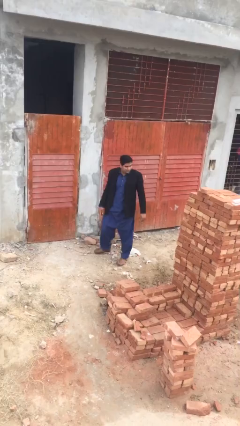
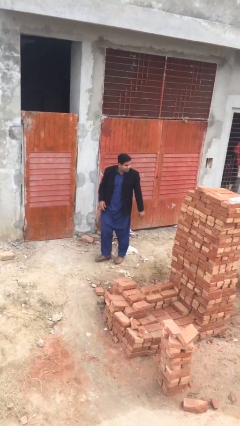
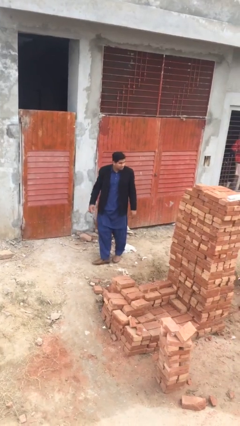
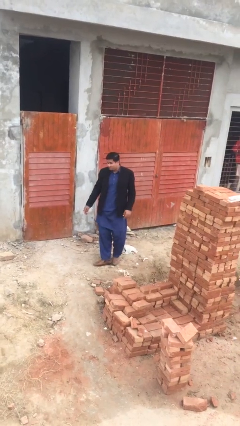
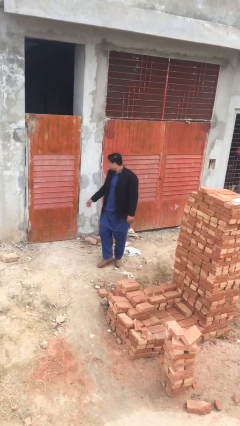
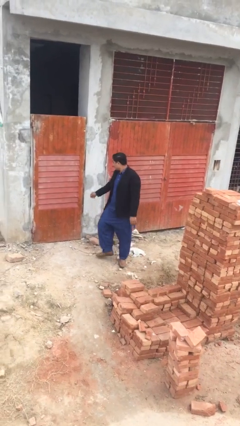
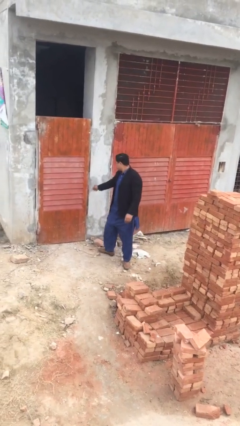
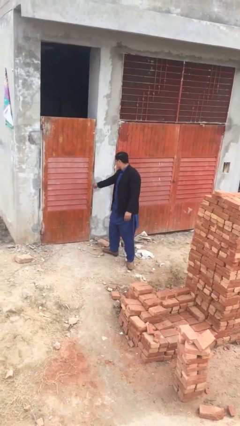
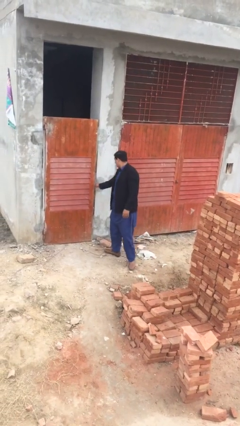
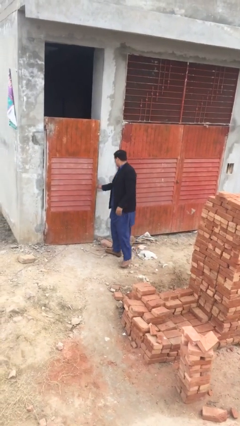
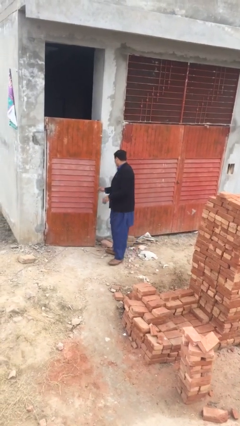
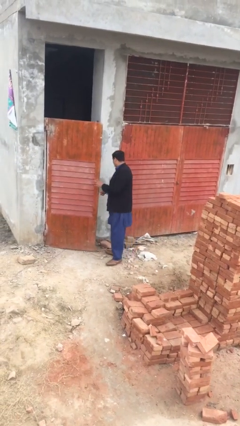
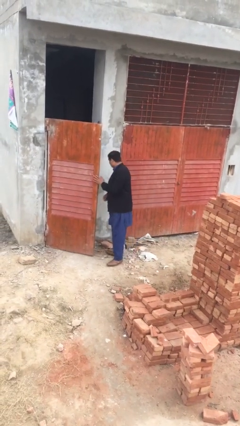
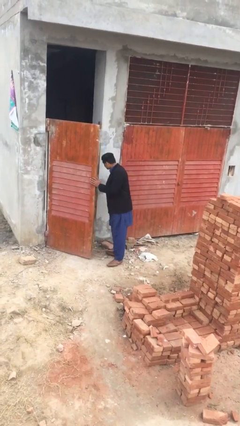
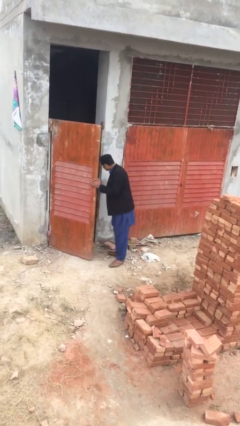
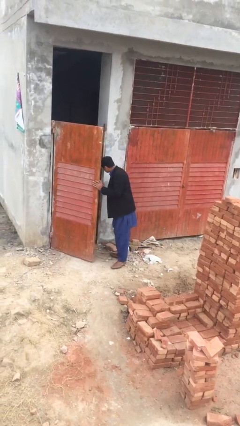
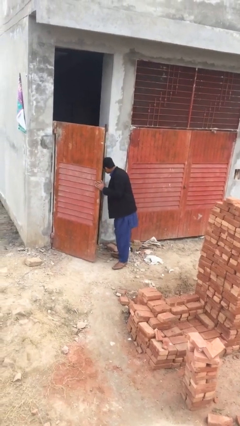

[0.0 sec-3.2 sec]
person opens facility door

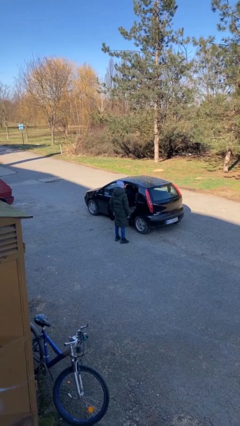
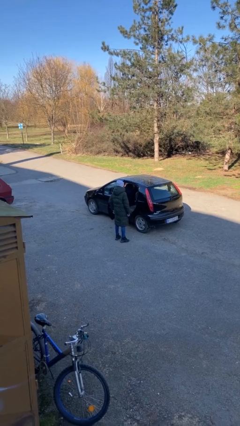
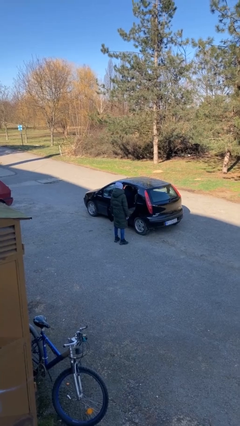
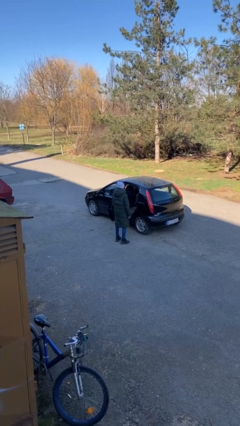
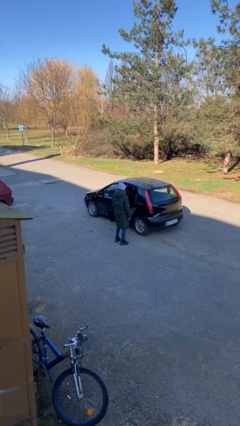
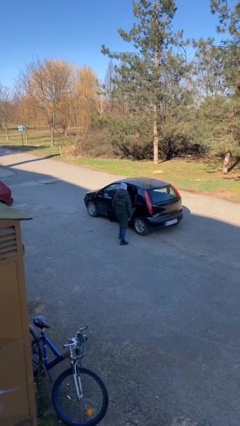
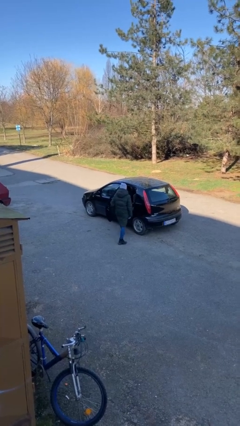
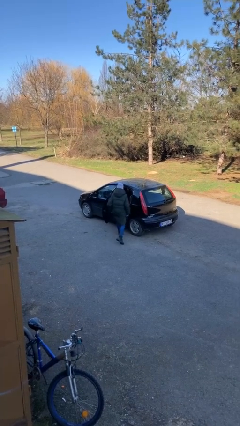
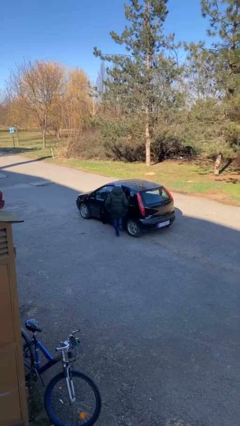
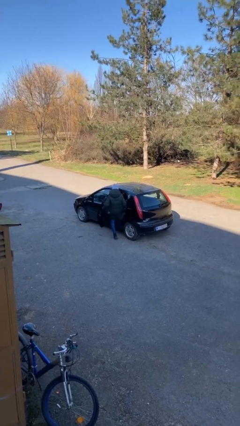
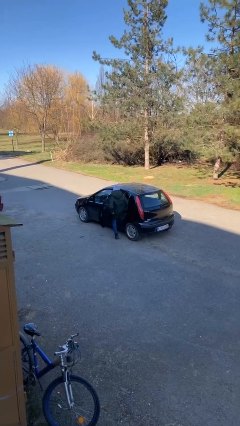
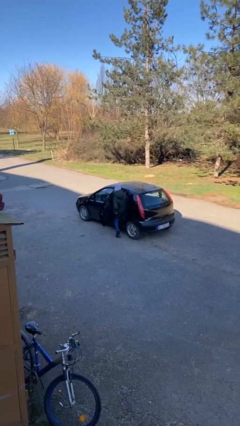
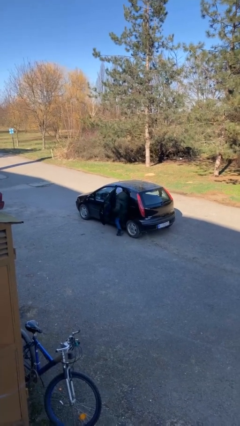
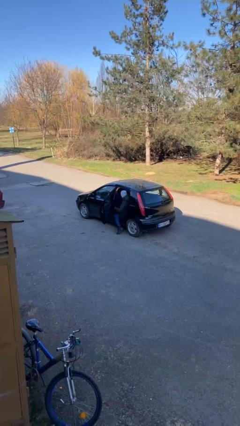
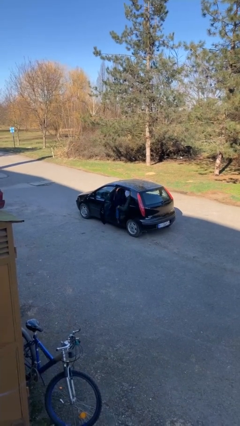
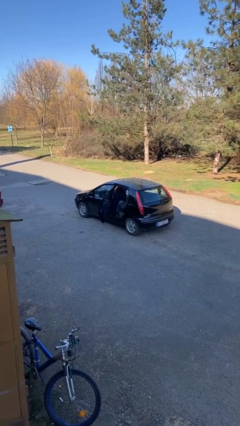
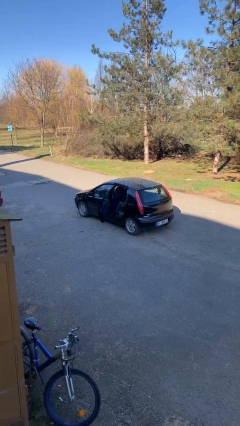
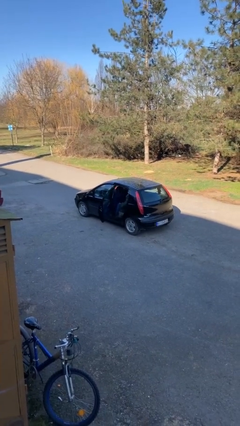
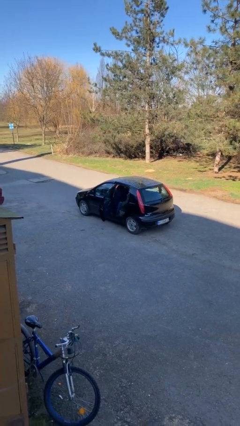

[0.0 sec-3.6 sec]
person enters car

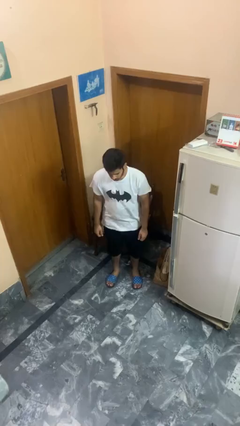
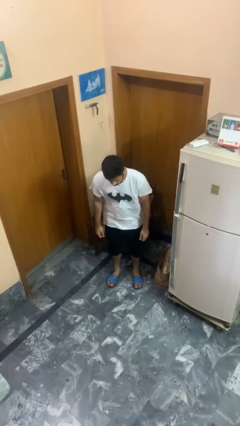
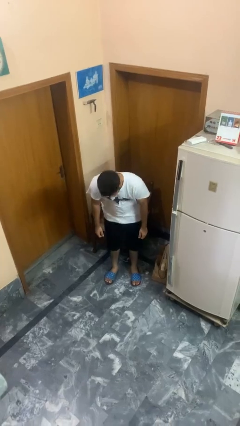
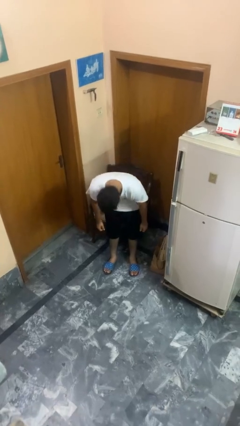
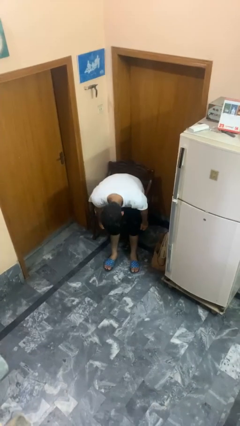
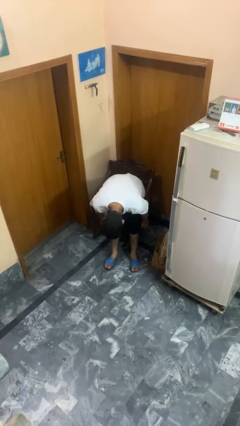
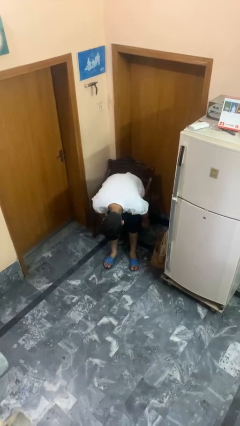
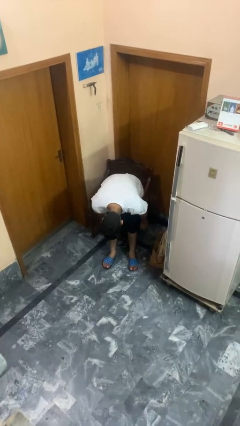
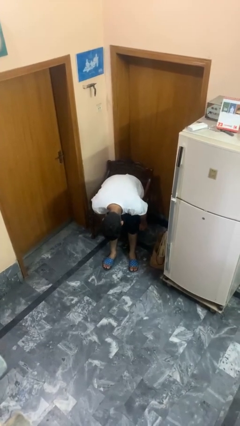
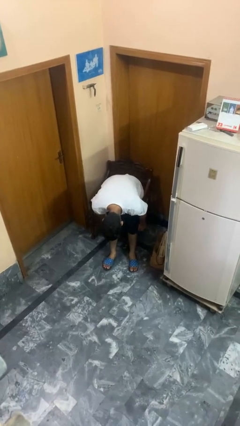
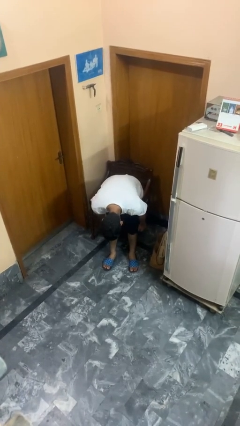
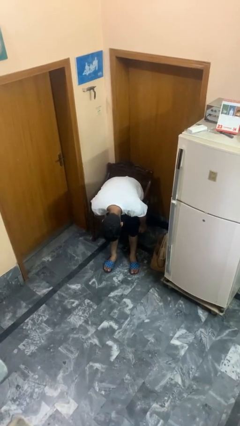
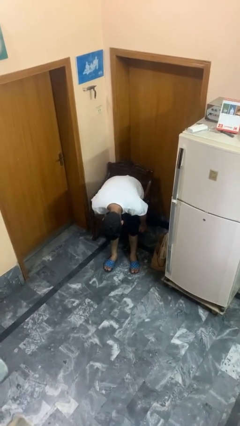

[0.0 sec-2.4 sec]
person bows

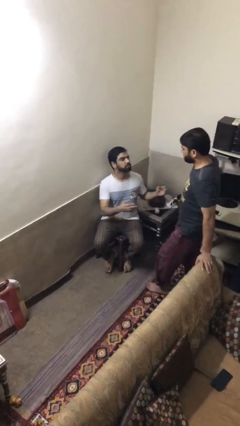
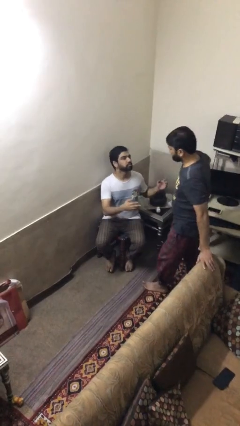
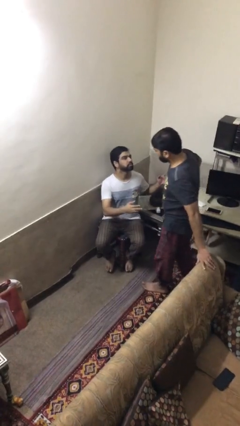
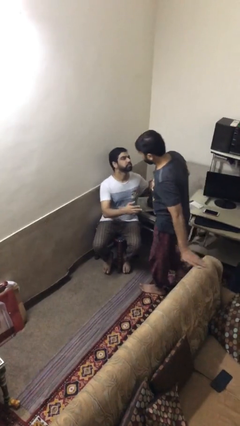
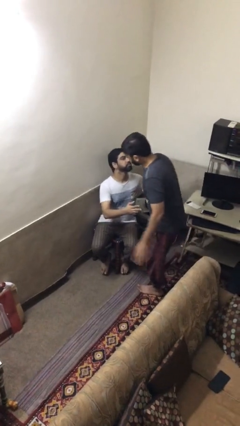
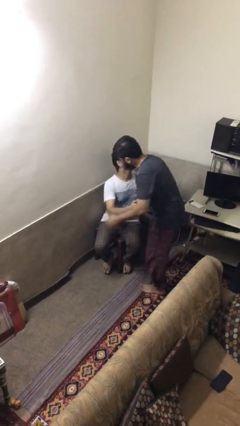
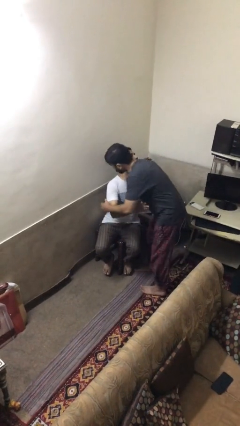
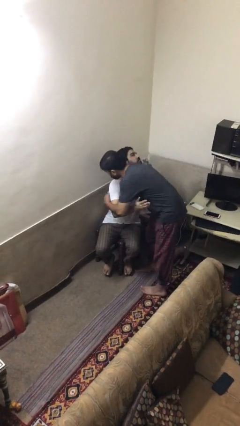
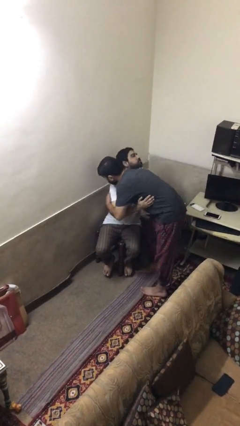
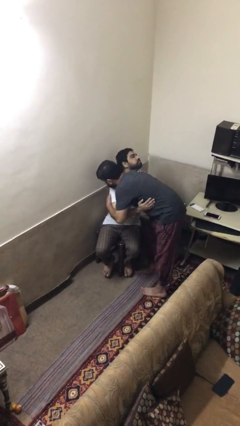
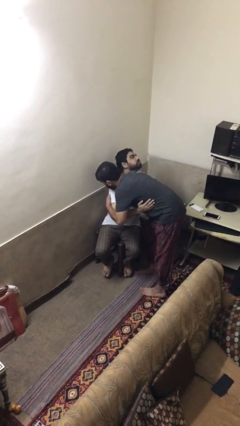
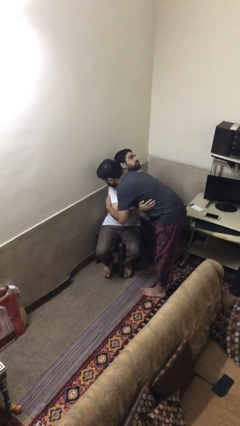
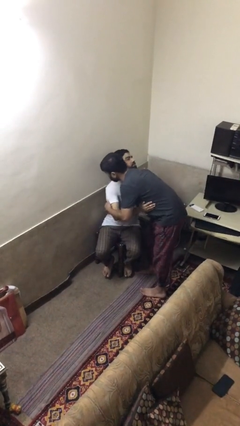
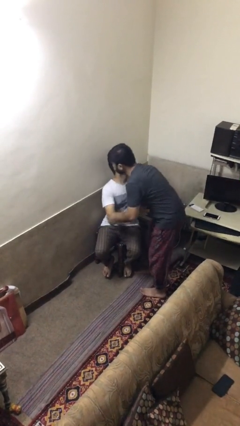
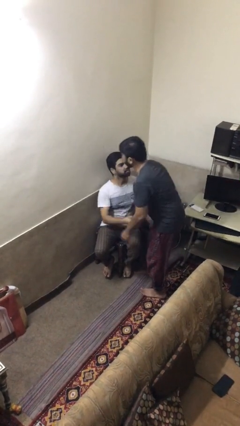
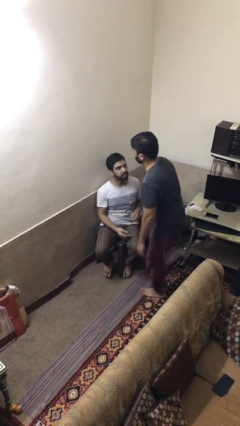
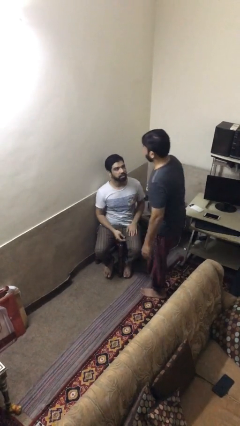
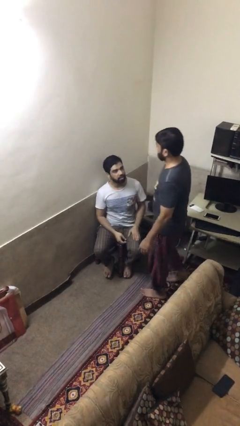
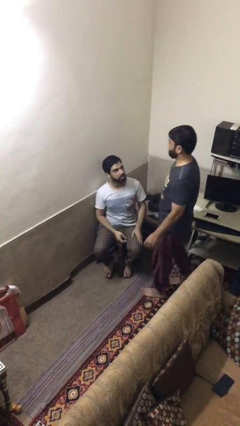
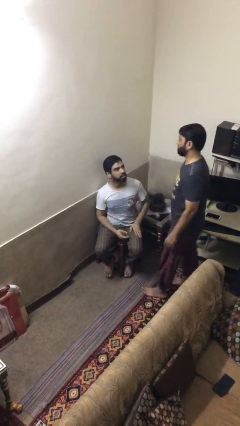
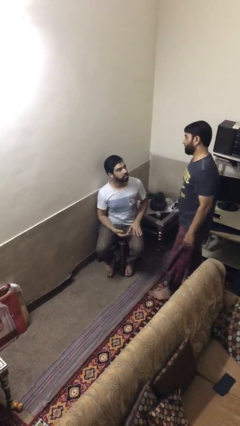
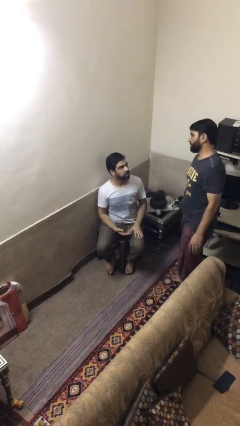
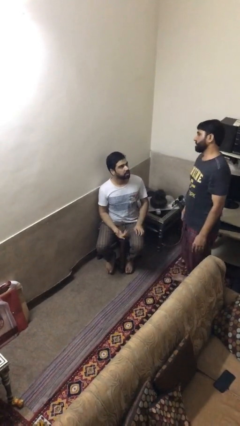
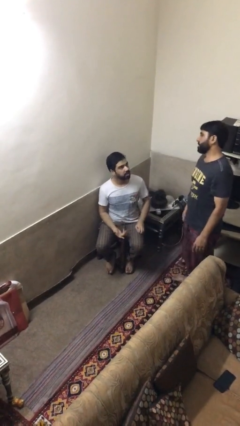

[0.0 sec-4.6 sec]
person embraces person

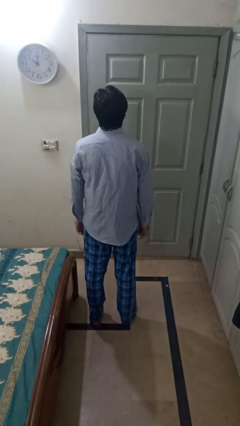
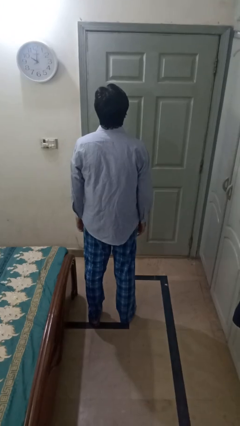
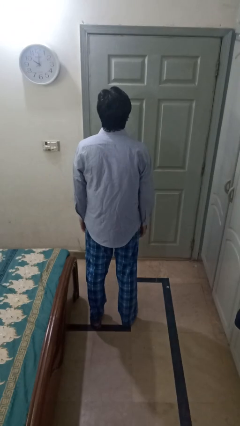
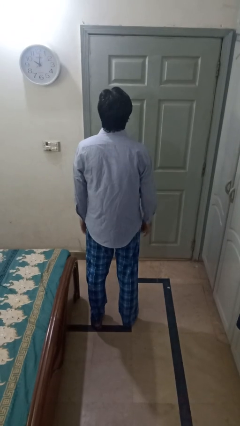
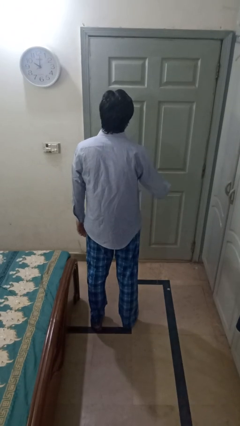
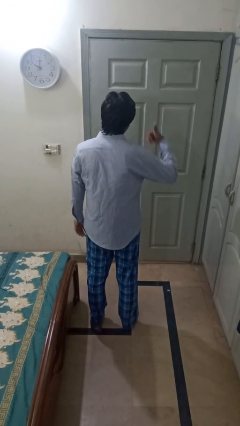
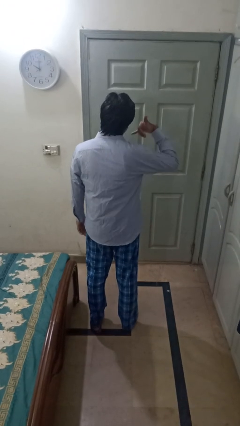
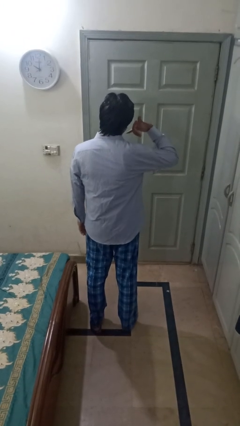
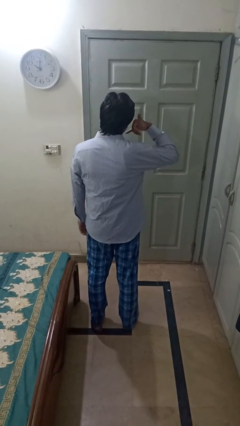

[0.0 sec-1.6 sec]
person gestures call me

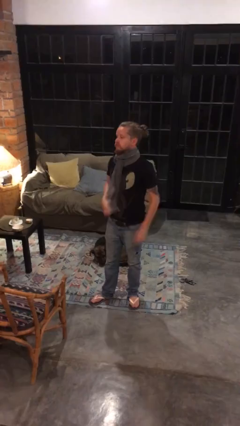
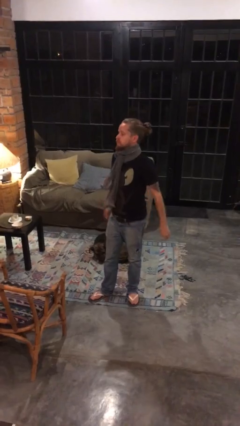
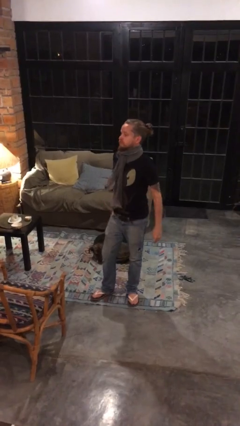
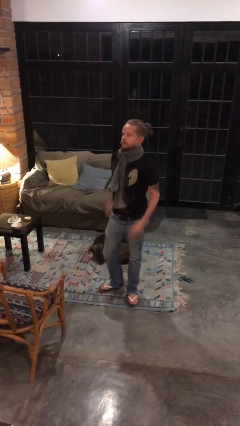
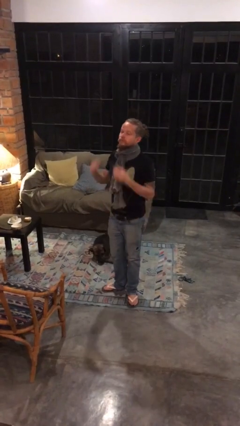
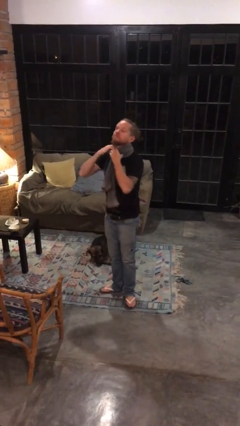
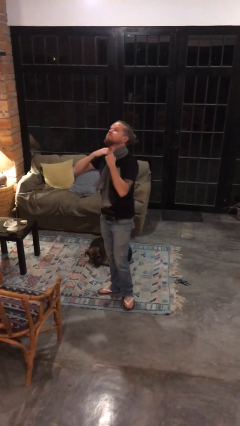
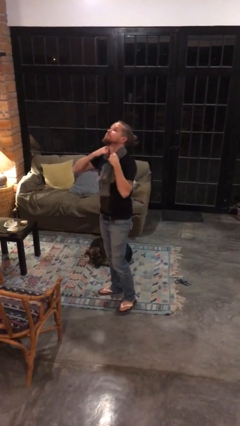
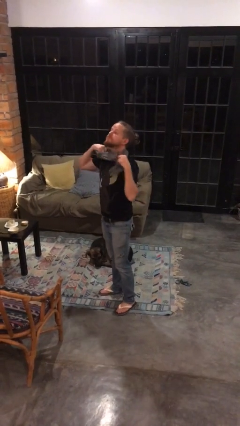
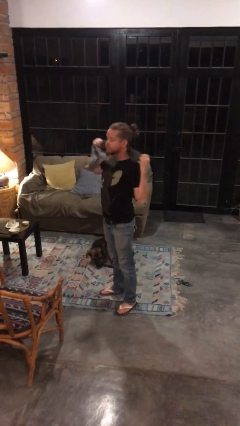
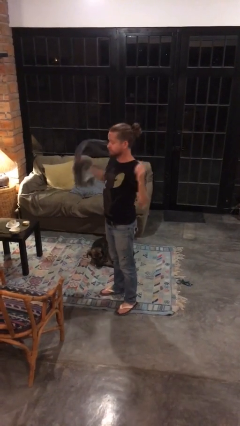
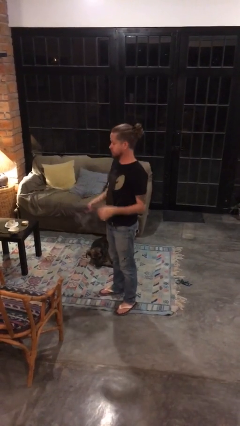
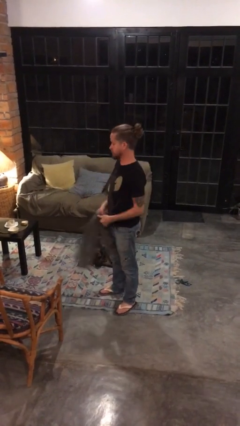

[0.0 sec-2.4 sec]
person takes off scarf
